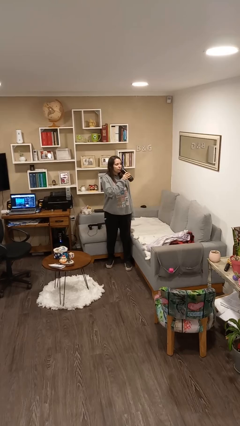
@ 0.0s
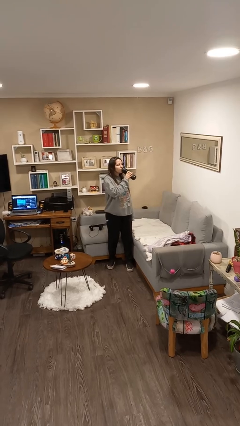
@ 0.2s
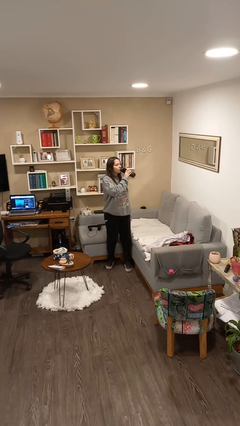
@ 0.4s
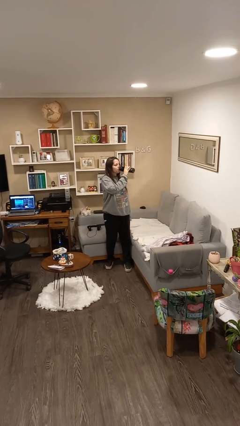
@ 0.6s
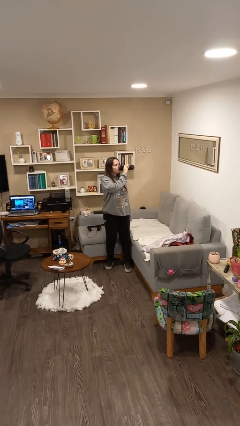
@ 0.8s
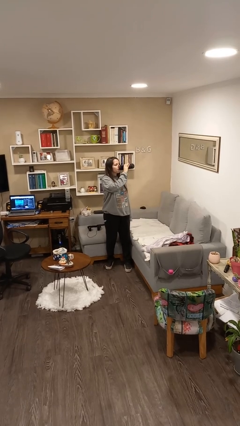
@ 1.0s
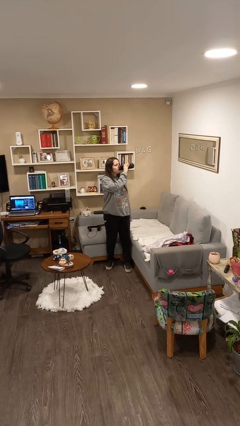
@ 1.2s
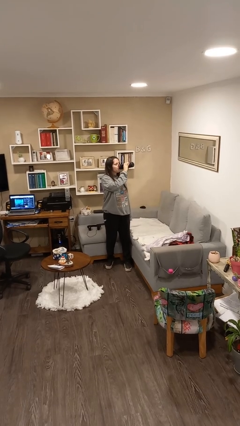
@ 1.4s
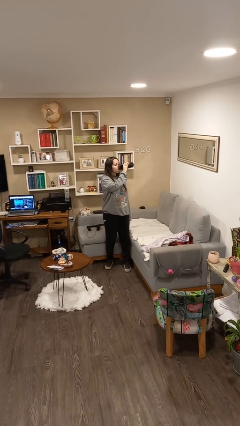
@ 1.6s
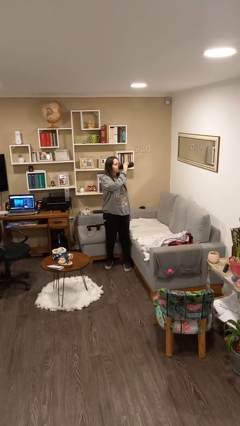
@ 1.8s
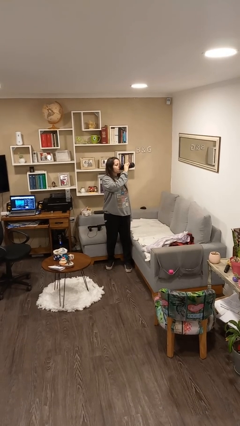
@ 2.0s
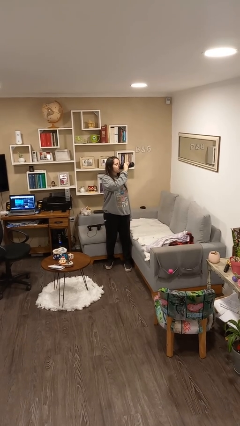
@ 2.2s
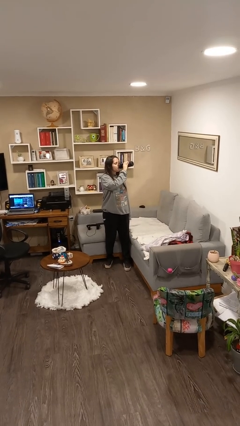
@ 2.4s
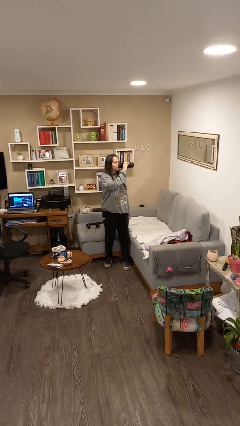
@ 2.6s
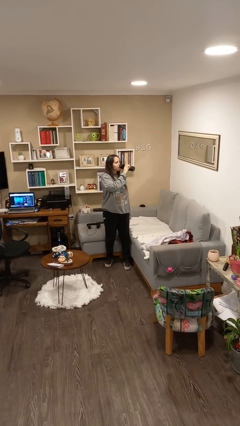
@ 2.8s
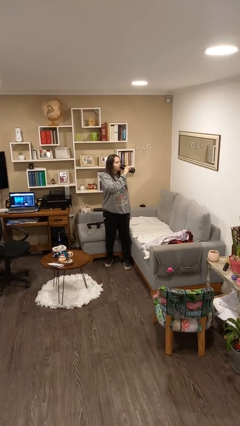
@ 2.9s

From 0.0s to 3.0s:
person drinks from bottle

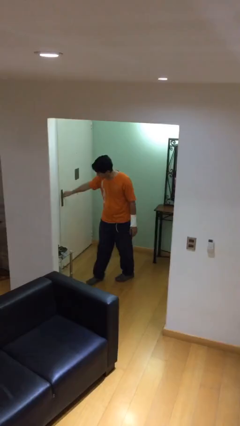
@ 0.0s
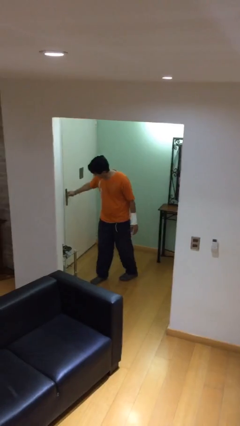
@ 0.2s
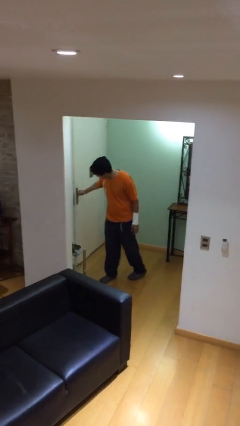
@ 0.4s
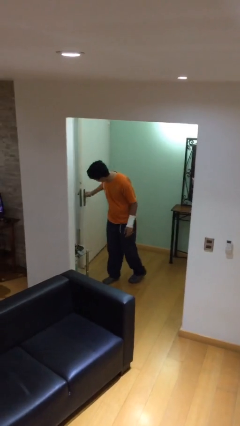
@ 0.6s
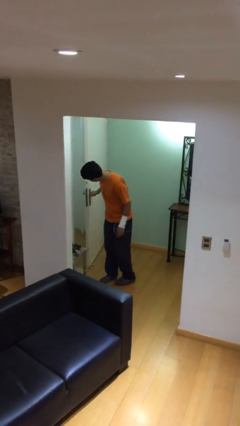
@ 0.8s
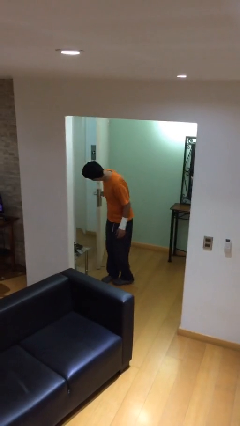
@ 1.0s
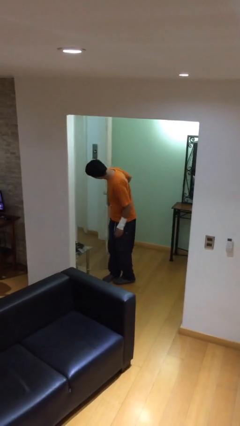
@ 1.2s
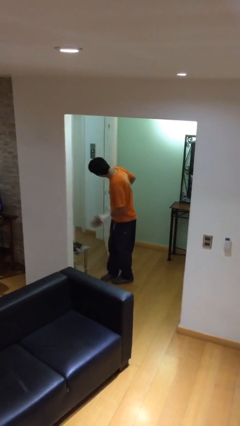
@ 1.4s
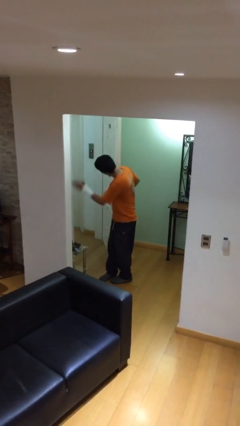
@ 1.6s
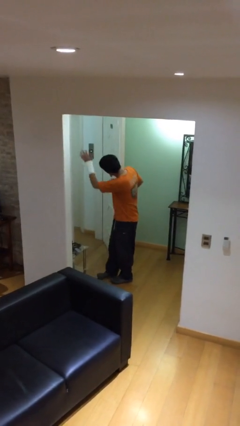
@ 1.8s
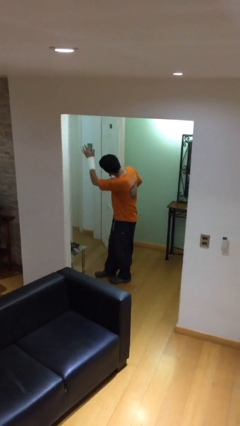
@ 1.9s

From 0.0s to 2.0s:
person opens facility door

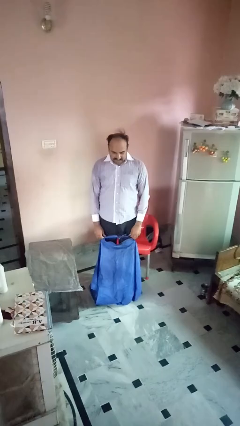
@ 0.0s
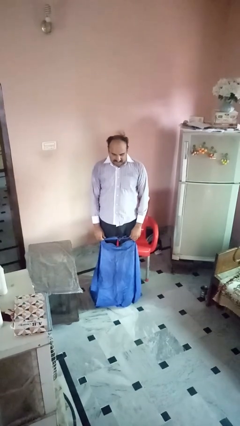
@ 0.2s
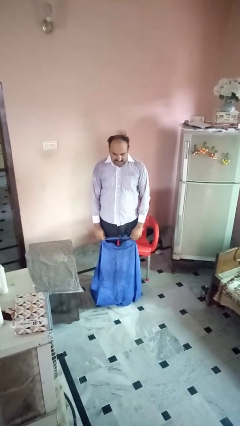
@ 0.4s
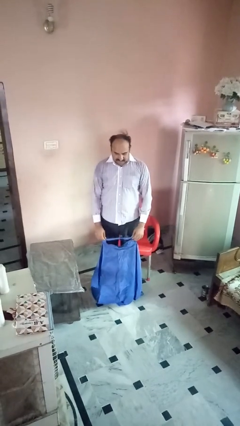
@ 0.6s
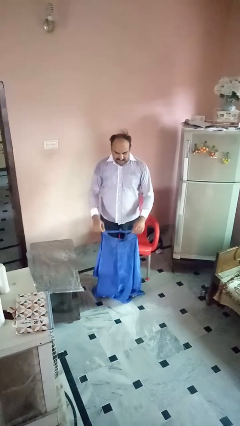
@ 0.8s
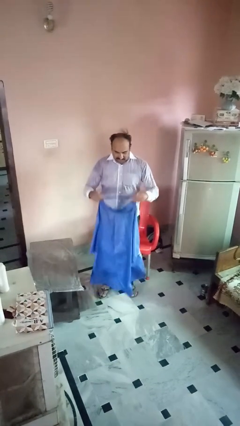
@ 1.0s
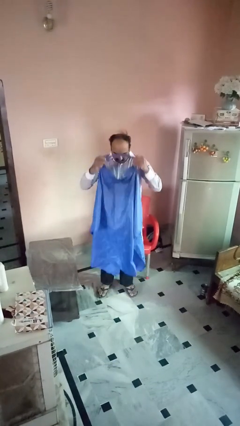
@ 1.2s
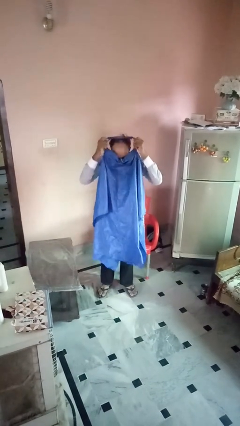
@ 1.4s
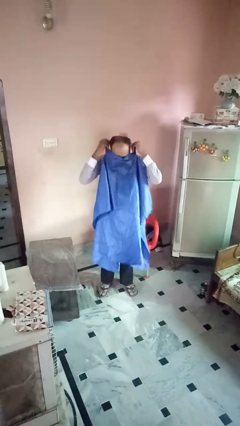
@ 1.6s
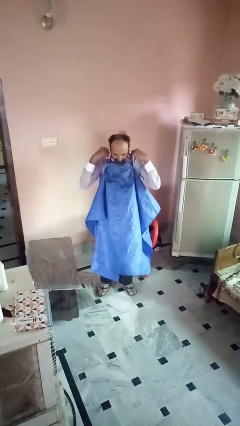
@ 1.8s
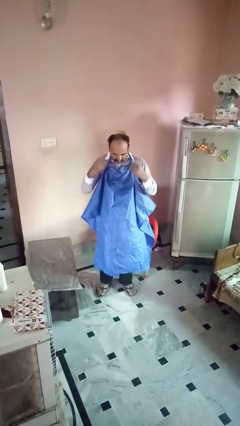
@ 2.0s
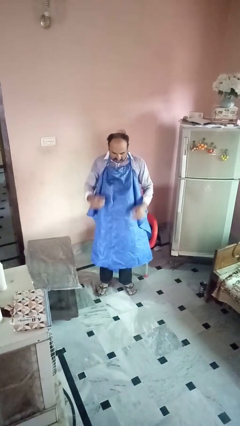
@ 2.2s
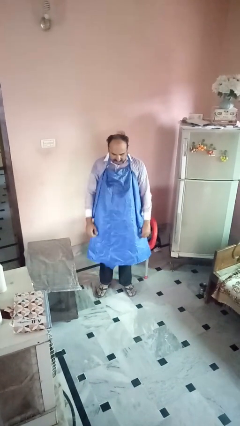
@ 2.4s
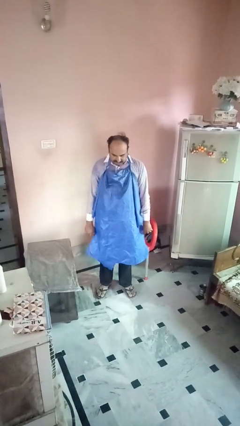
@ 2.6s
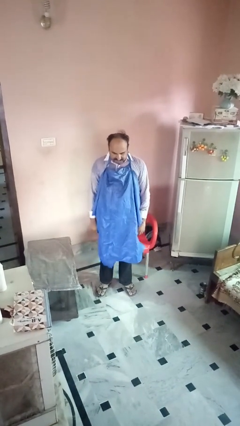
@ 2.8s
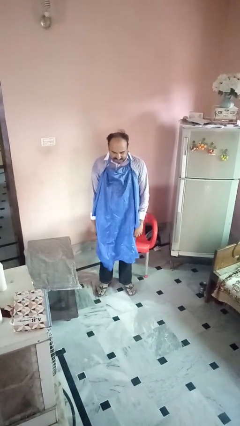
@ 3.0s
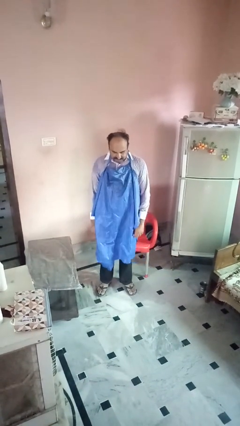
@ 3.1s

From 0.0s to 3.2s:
person puts on apron

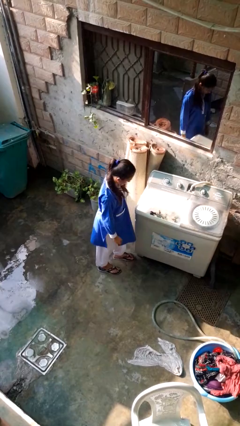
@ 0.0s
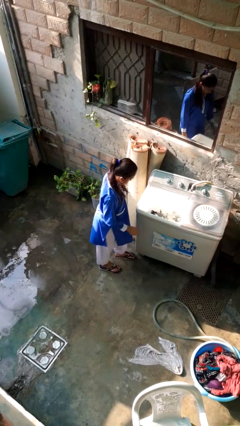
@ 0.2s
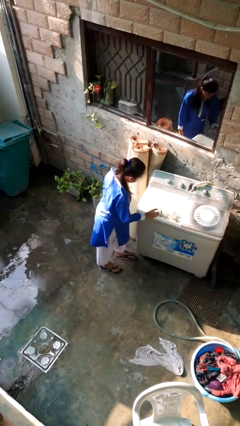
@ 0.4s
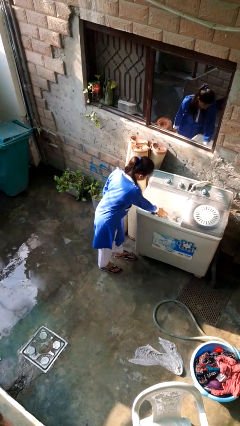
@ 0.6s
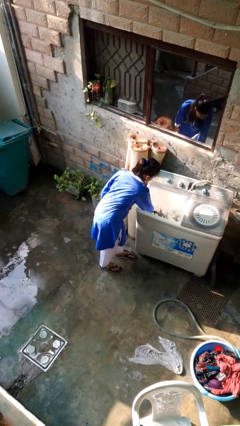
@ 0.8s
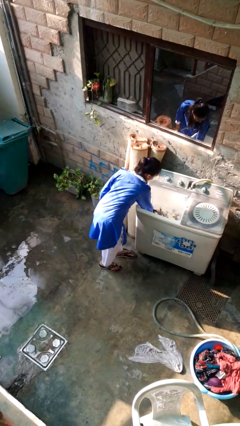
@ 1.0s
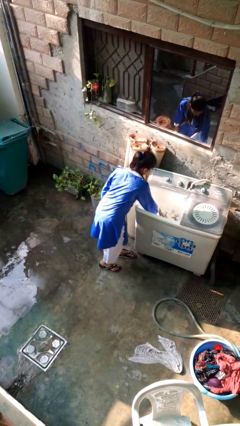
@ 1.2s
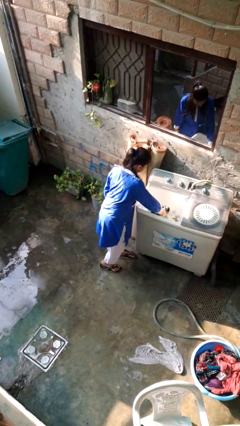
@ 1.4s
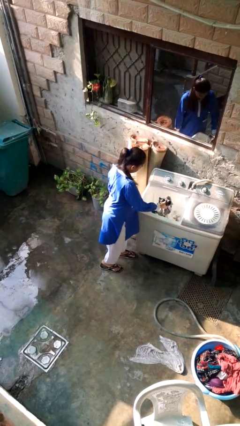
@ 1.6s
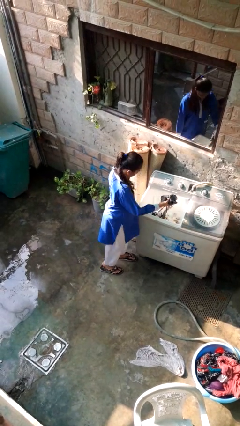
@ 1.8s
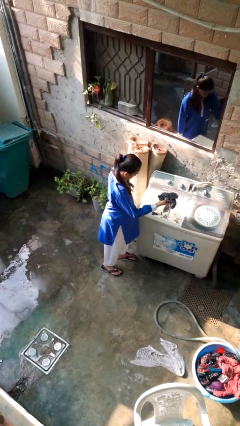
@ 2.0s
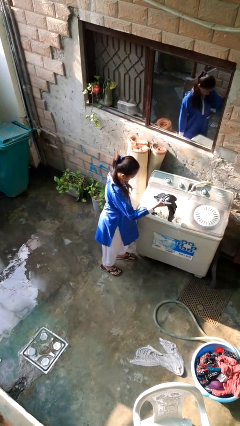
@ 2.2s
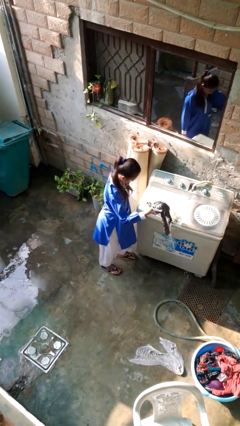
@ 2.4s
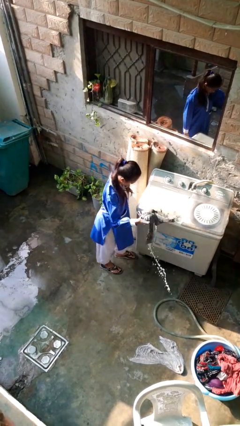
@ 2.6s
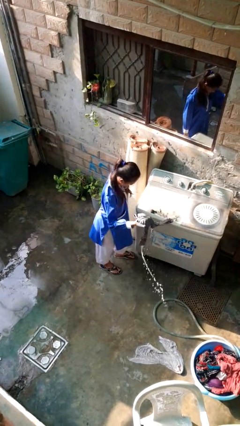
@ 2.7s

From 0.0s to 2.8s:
person unloads clotheswasher

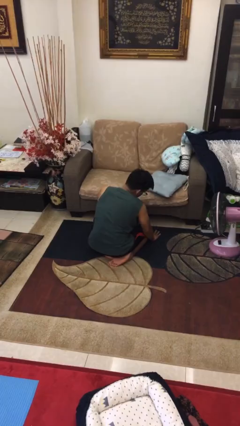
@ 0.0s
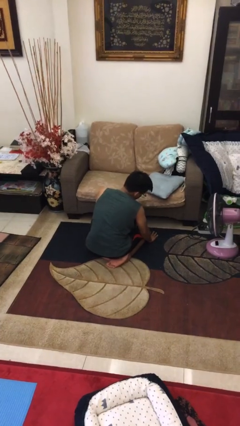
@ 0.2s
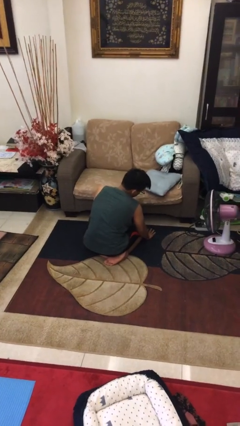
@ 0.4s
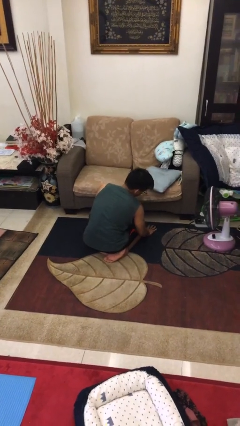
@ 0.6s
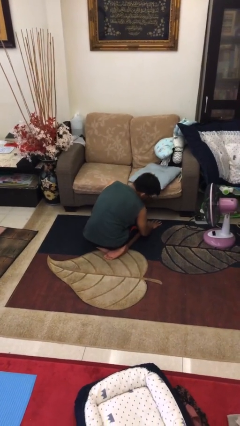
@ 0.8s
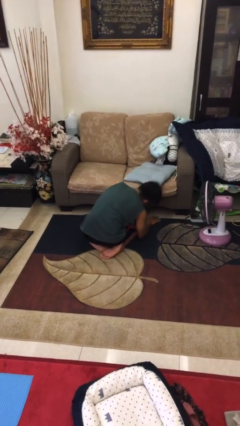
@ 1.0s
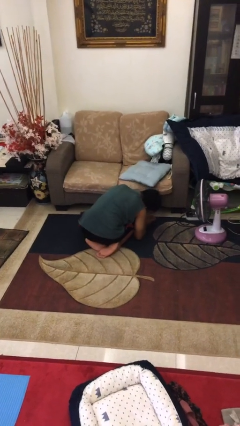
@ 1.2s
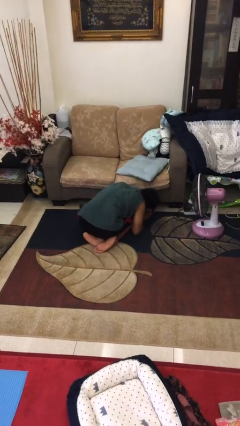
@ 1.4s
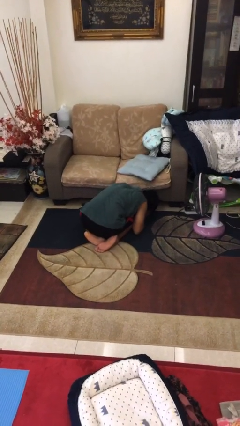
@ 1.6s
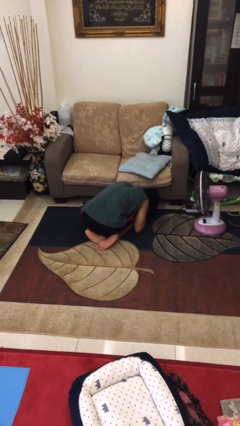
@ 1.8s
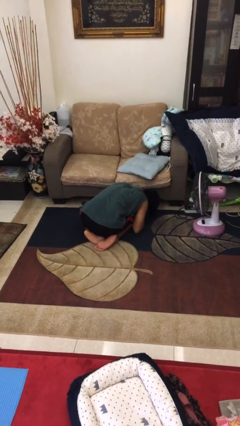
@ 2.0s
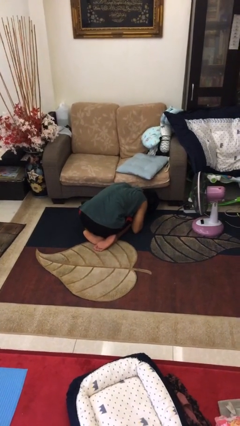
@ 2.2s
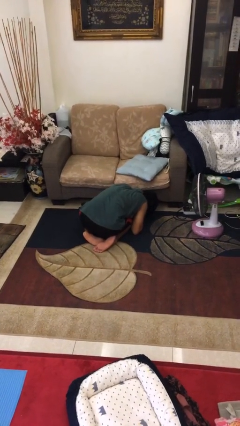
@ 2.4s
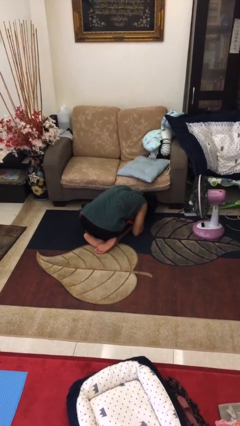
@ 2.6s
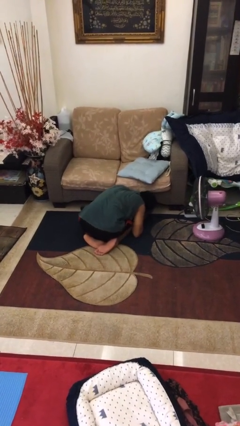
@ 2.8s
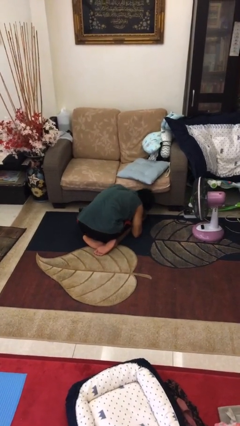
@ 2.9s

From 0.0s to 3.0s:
person searches under couch

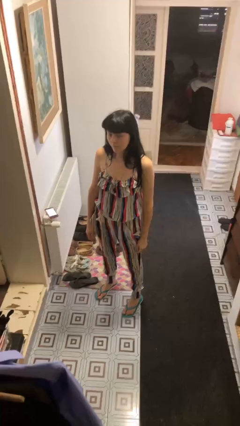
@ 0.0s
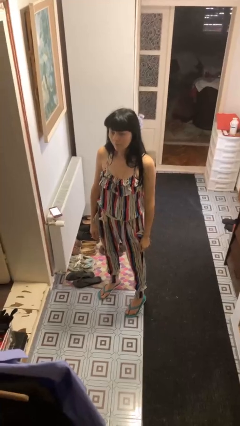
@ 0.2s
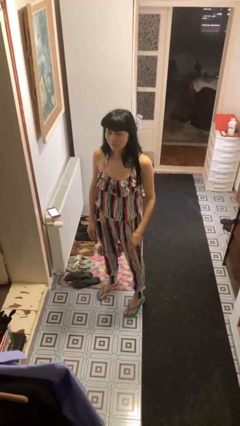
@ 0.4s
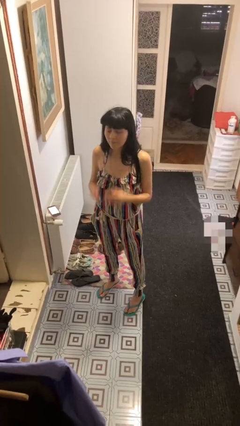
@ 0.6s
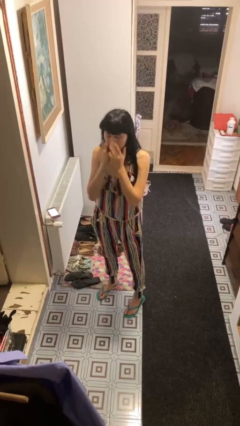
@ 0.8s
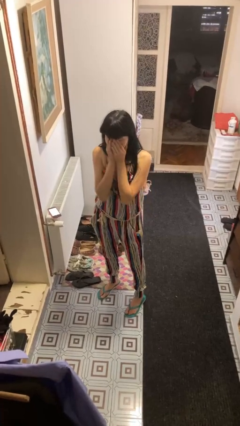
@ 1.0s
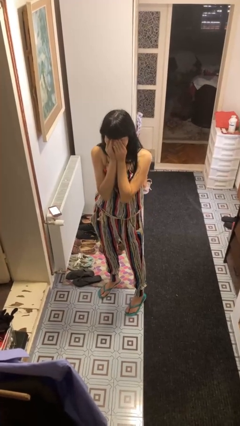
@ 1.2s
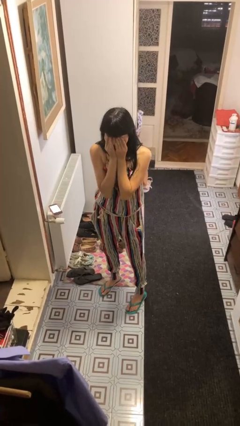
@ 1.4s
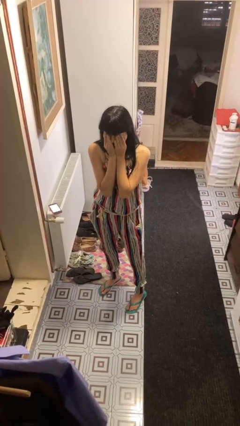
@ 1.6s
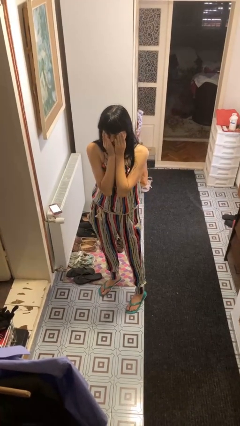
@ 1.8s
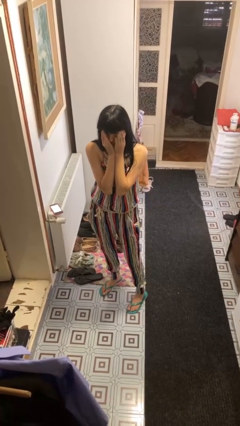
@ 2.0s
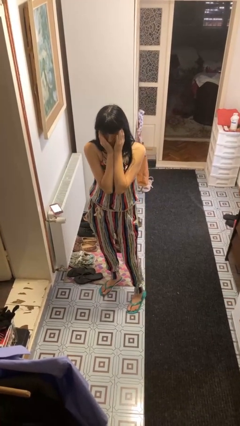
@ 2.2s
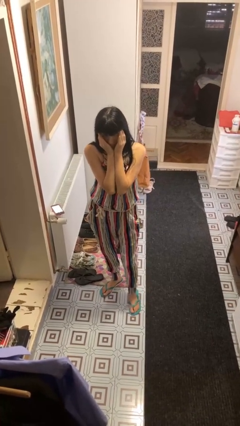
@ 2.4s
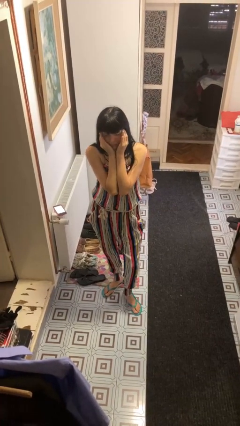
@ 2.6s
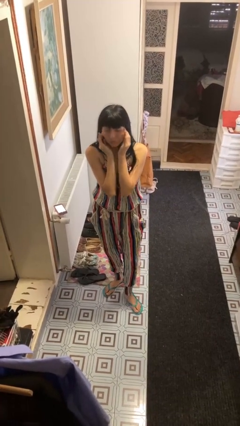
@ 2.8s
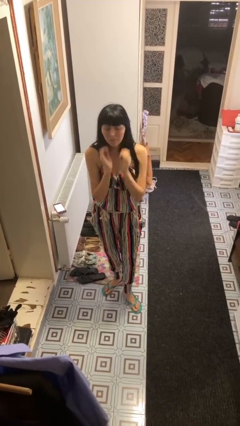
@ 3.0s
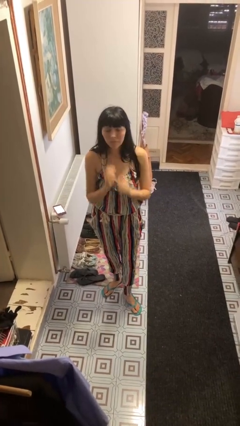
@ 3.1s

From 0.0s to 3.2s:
person rubs eyes
